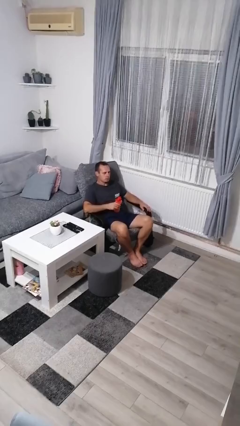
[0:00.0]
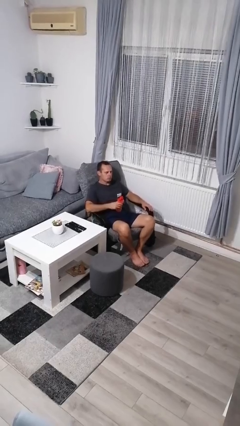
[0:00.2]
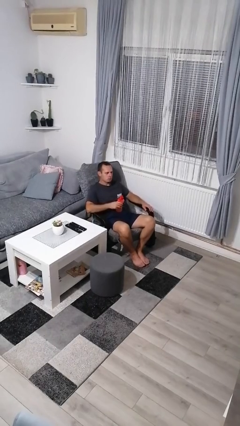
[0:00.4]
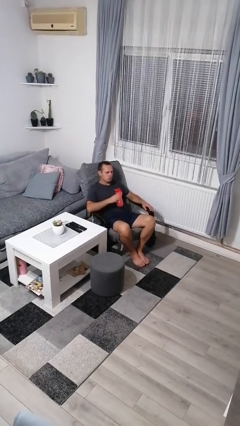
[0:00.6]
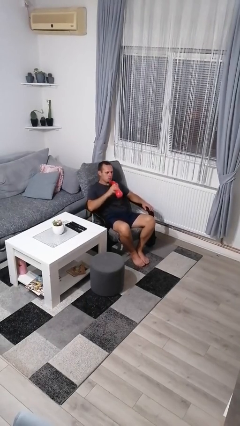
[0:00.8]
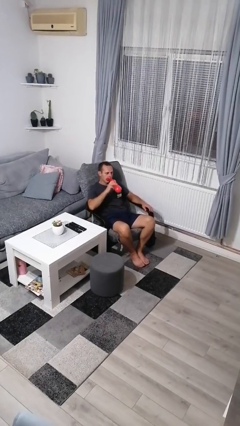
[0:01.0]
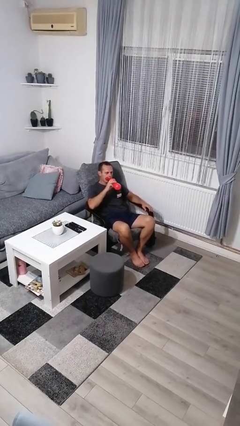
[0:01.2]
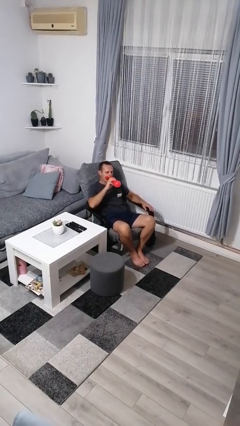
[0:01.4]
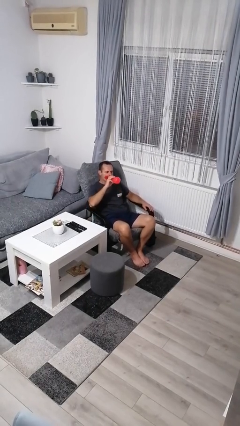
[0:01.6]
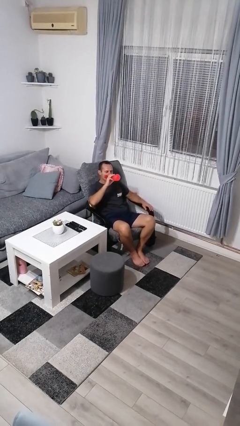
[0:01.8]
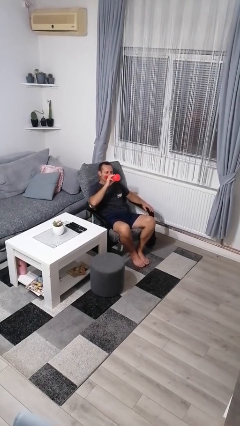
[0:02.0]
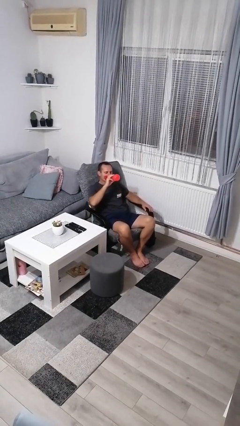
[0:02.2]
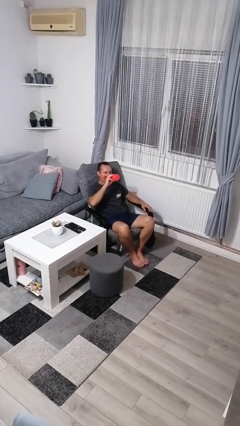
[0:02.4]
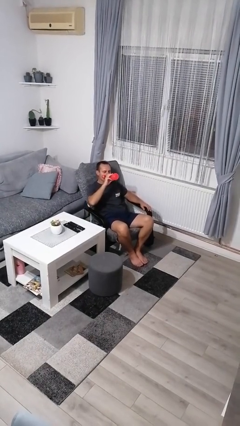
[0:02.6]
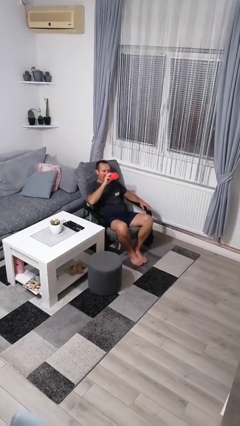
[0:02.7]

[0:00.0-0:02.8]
person drinks from bottle

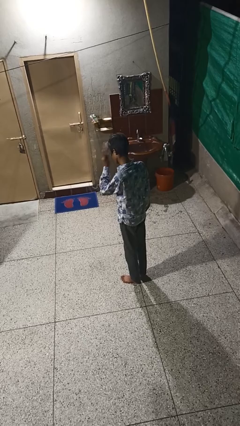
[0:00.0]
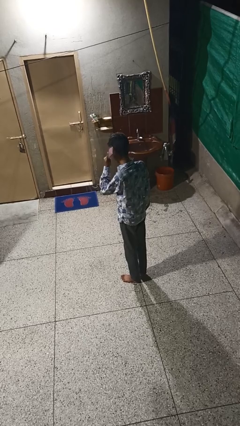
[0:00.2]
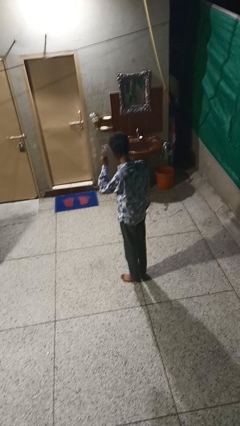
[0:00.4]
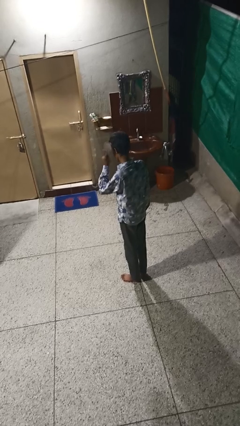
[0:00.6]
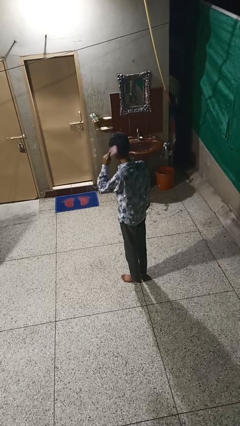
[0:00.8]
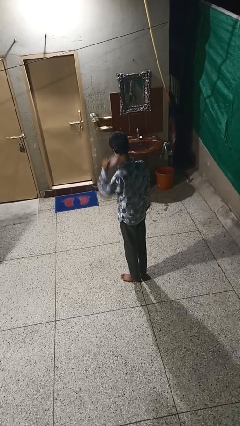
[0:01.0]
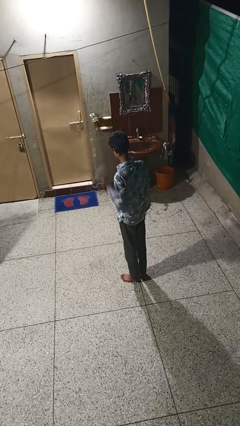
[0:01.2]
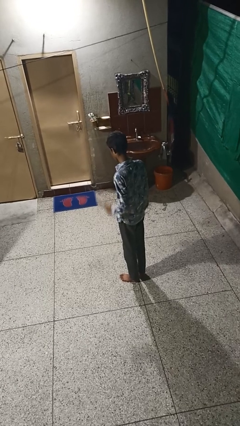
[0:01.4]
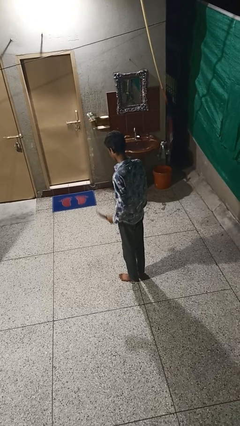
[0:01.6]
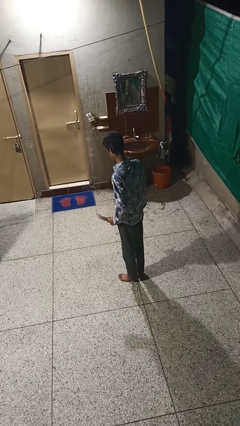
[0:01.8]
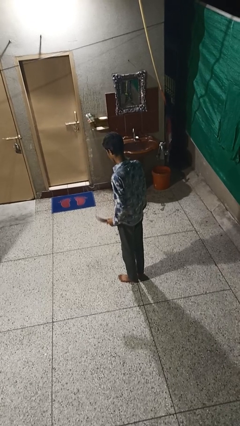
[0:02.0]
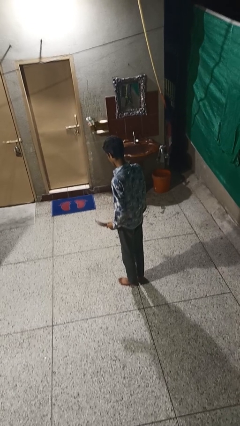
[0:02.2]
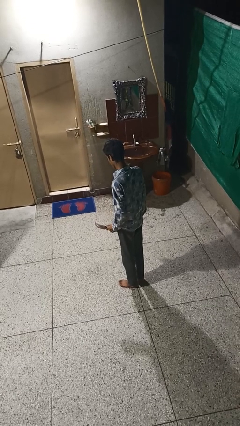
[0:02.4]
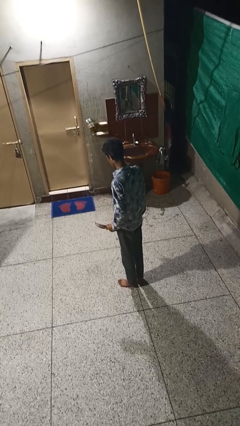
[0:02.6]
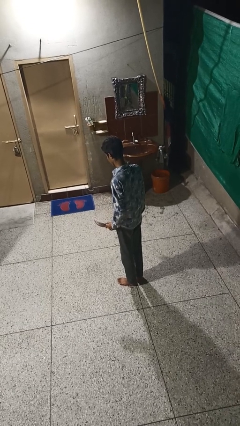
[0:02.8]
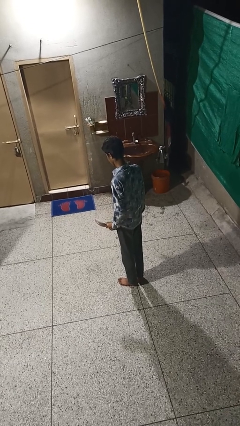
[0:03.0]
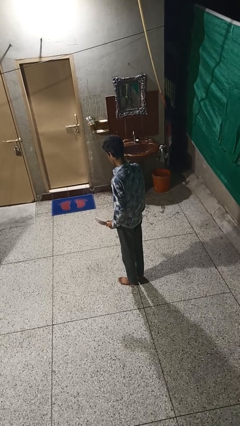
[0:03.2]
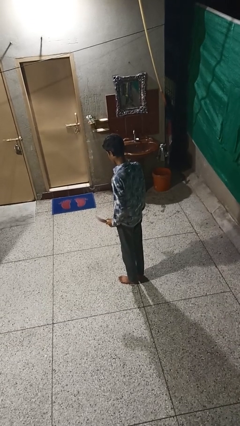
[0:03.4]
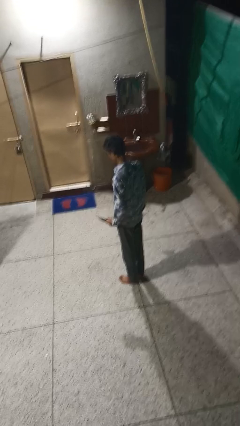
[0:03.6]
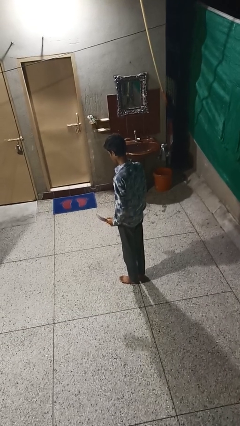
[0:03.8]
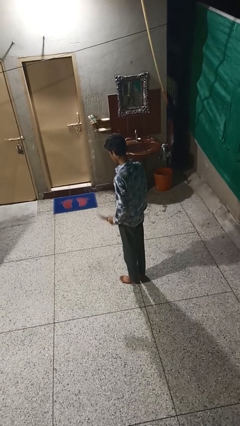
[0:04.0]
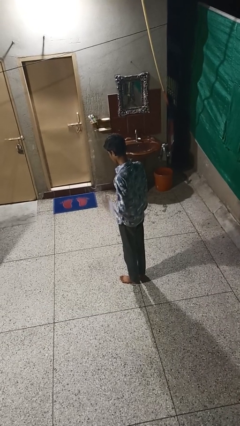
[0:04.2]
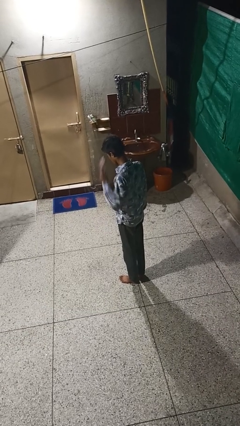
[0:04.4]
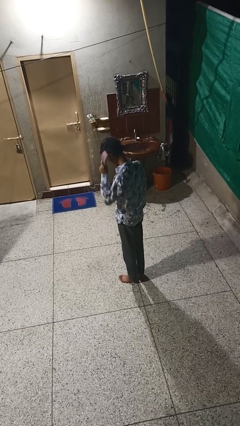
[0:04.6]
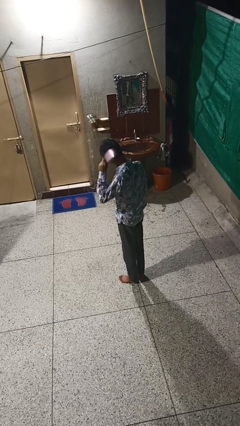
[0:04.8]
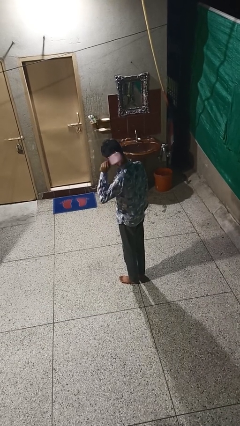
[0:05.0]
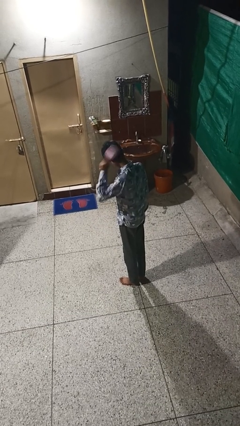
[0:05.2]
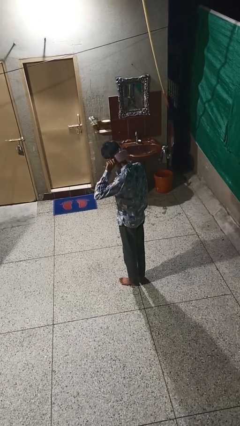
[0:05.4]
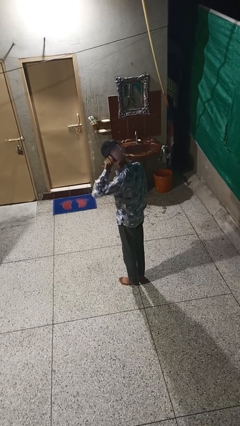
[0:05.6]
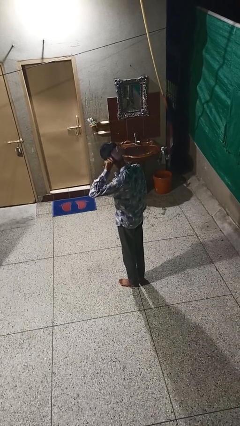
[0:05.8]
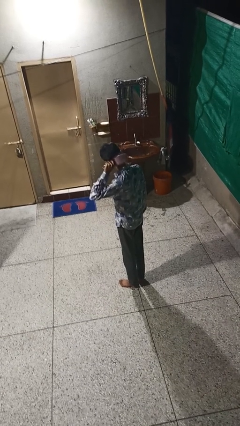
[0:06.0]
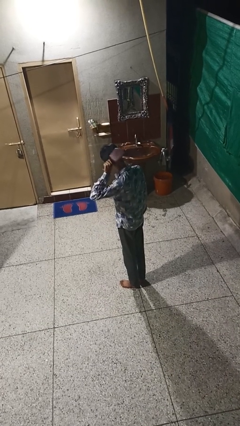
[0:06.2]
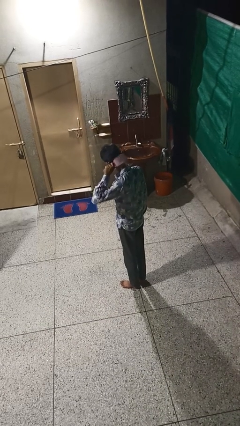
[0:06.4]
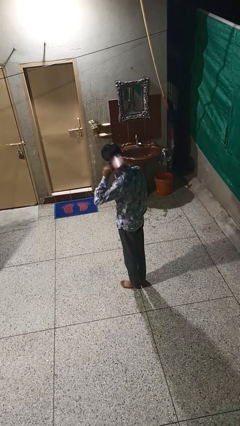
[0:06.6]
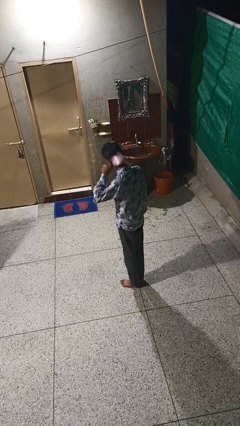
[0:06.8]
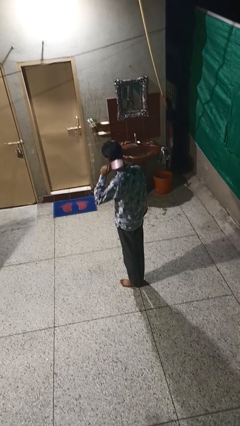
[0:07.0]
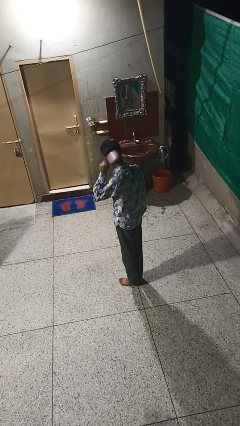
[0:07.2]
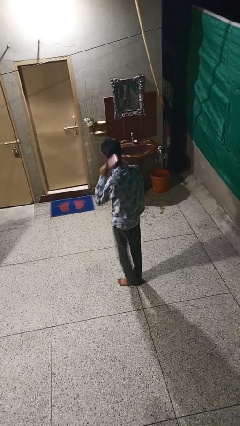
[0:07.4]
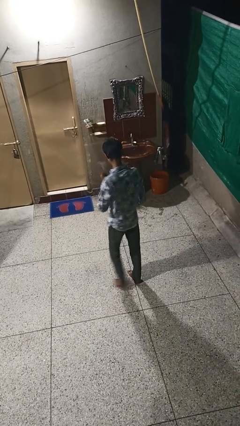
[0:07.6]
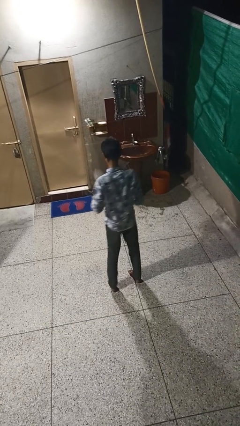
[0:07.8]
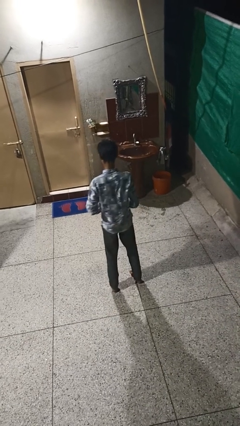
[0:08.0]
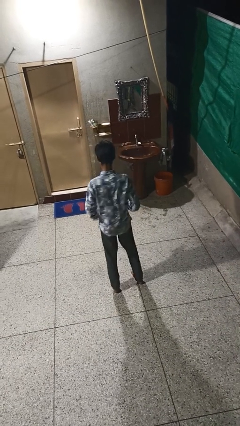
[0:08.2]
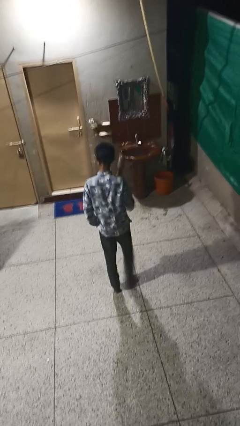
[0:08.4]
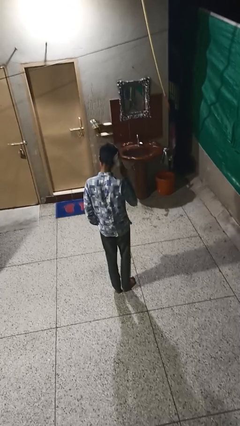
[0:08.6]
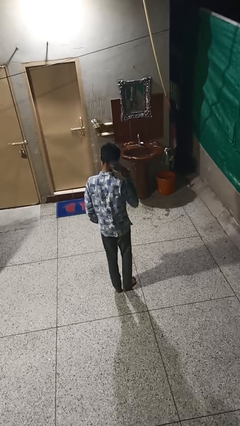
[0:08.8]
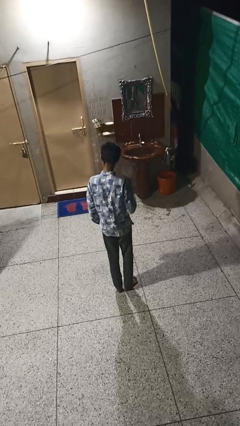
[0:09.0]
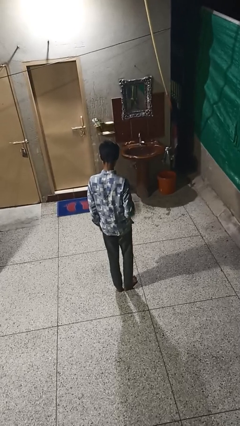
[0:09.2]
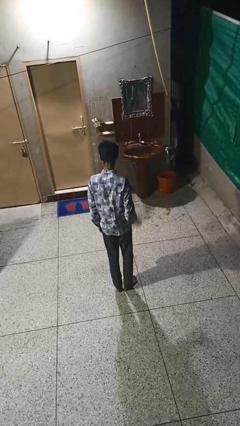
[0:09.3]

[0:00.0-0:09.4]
person puts on wristwatch

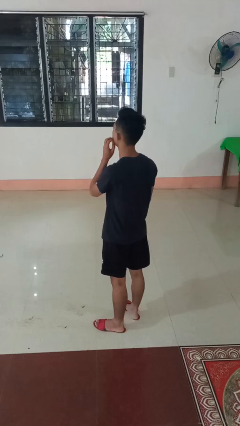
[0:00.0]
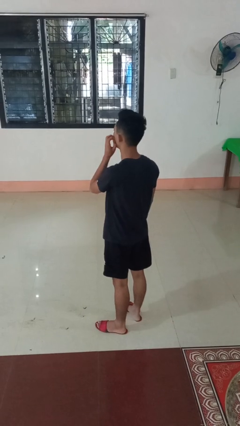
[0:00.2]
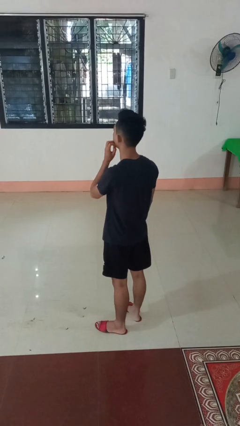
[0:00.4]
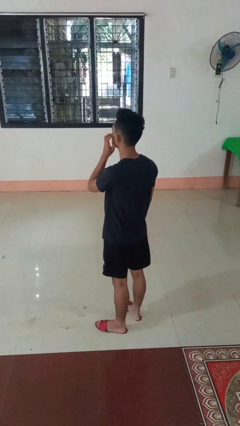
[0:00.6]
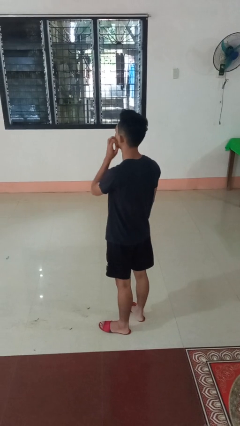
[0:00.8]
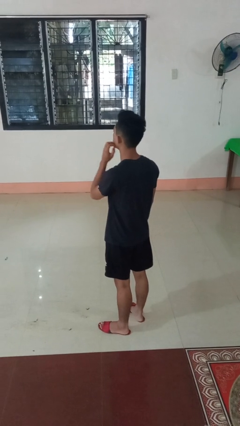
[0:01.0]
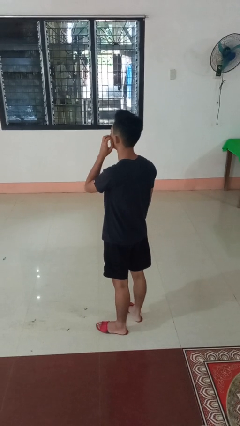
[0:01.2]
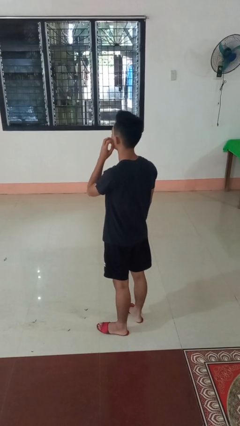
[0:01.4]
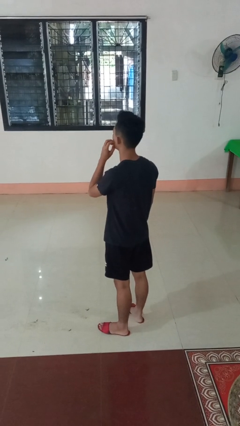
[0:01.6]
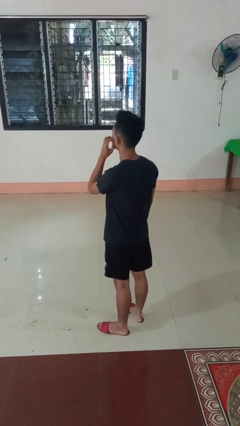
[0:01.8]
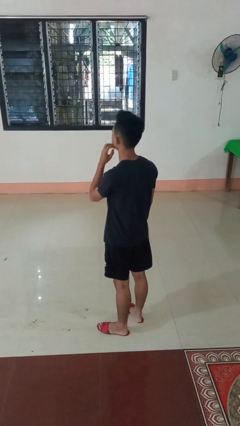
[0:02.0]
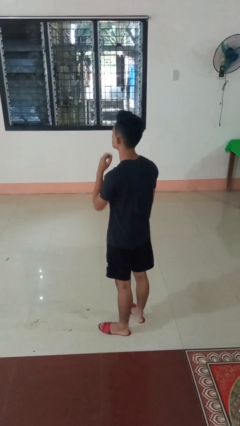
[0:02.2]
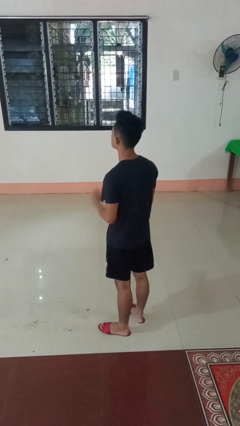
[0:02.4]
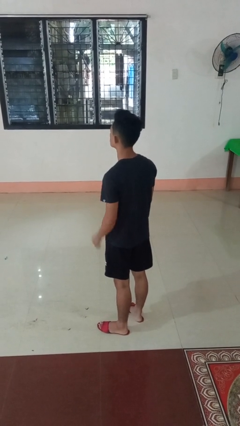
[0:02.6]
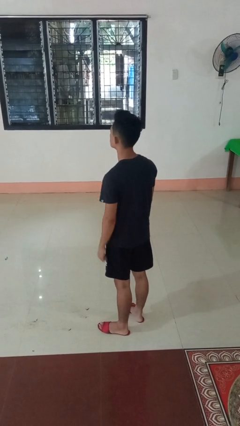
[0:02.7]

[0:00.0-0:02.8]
person scratches face

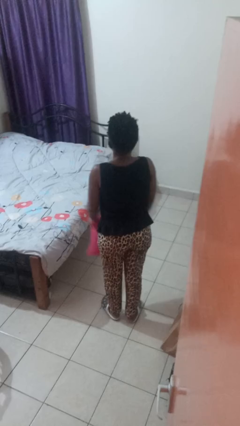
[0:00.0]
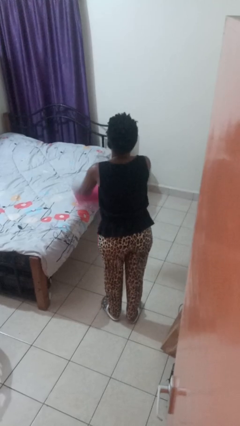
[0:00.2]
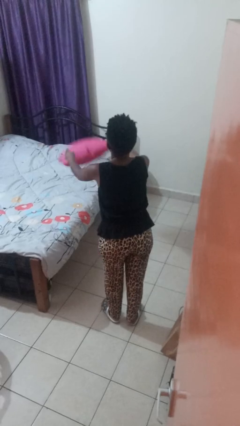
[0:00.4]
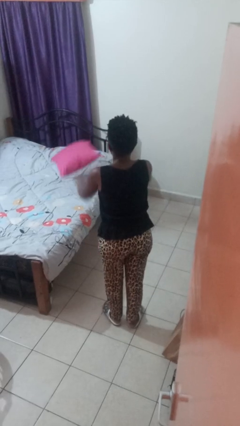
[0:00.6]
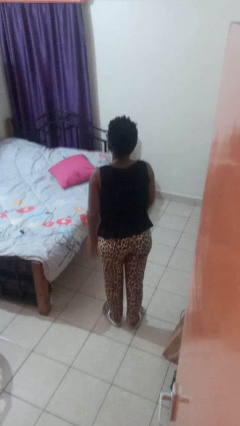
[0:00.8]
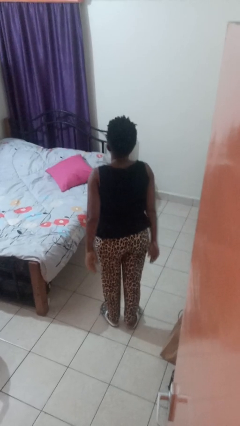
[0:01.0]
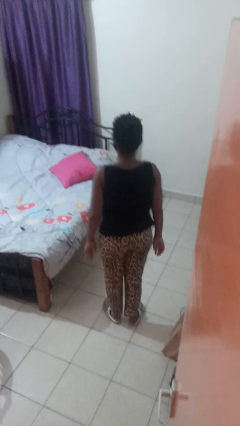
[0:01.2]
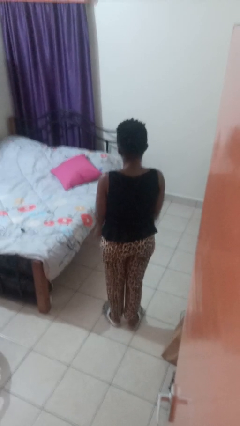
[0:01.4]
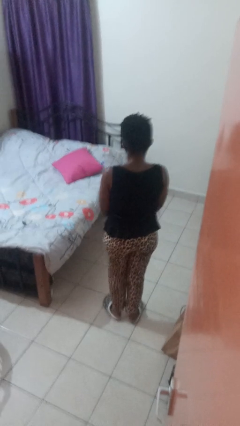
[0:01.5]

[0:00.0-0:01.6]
person throws object on bed

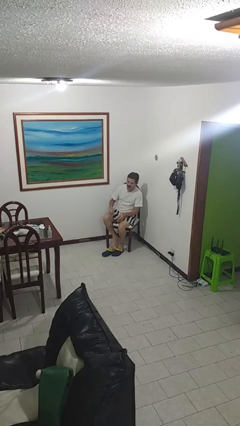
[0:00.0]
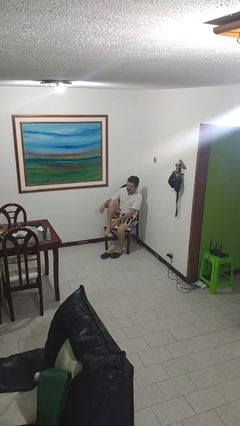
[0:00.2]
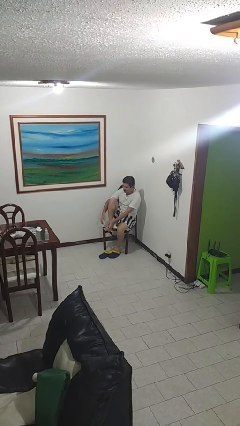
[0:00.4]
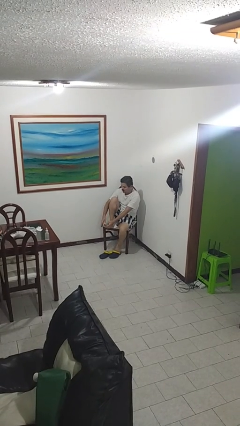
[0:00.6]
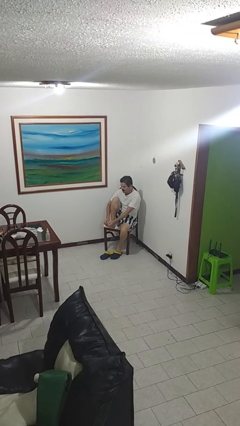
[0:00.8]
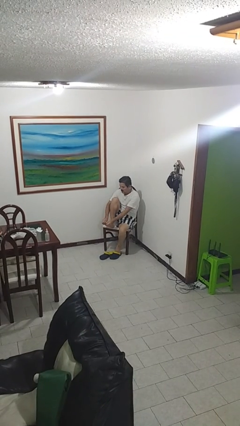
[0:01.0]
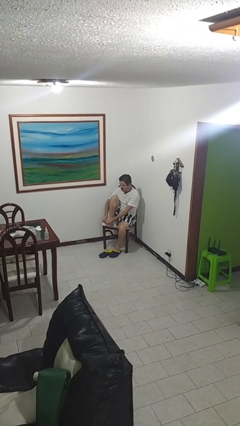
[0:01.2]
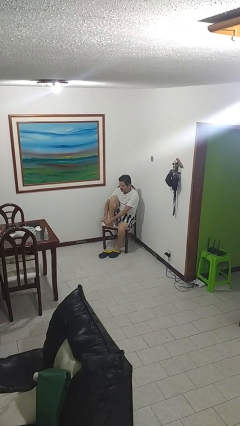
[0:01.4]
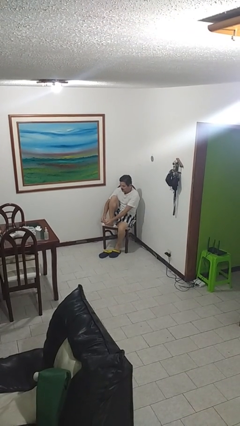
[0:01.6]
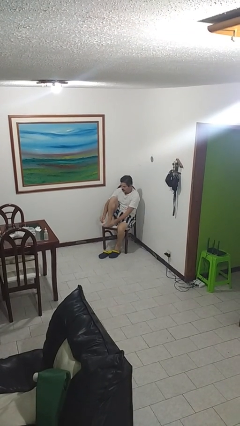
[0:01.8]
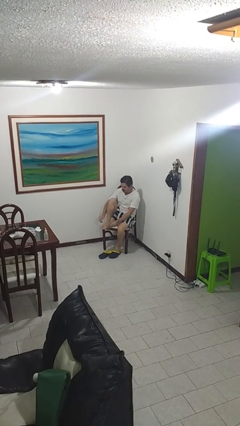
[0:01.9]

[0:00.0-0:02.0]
person rubs foot
